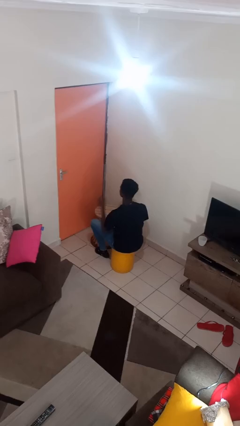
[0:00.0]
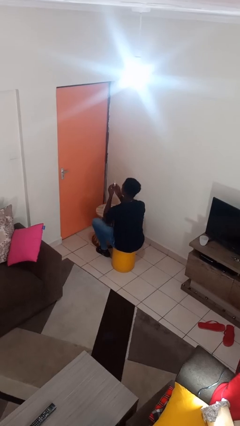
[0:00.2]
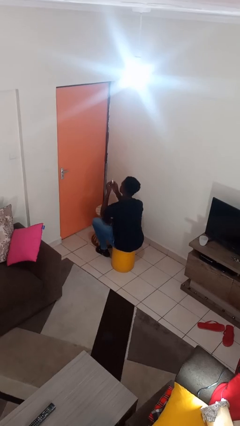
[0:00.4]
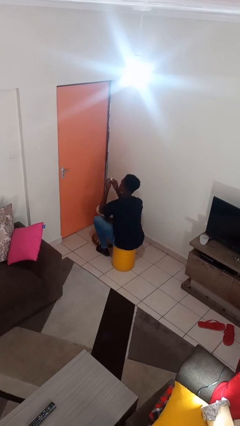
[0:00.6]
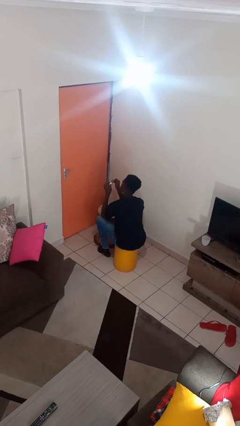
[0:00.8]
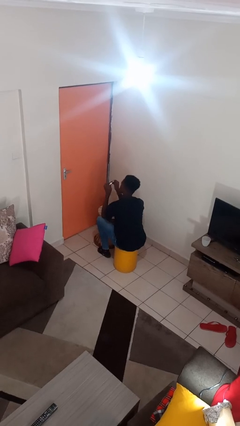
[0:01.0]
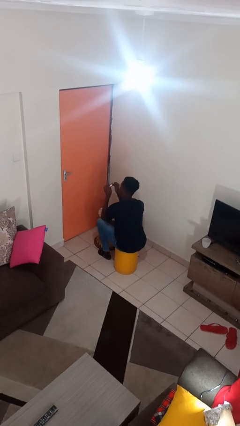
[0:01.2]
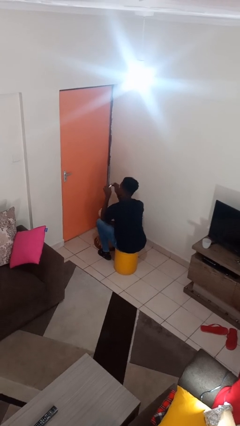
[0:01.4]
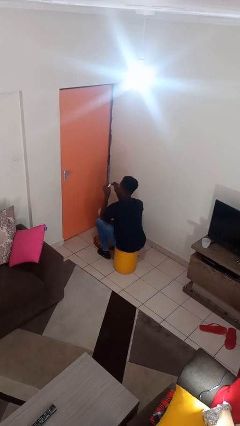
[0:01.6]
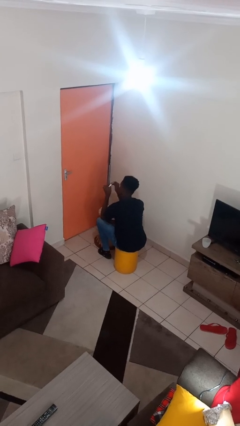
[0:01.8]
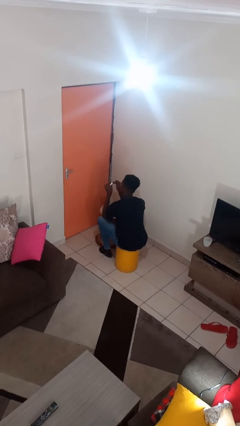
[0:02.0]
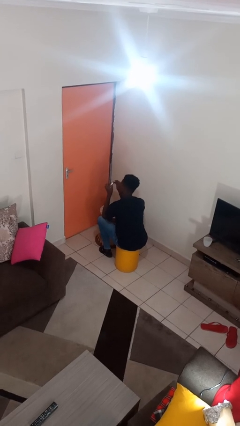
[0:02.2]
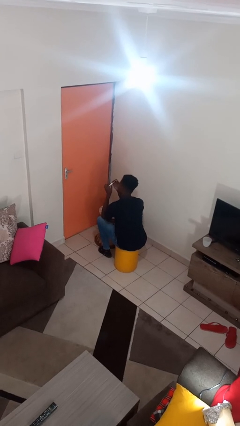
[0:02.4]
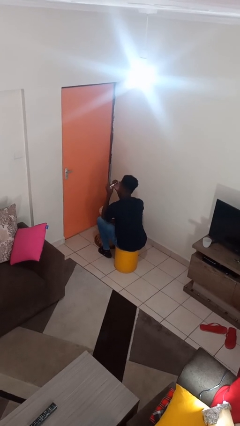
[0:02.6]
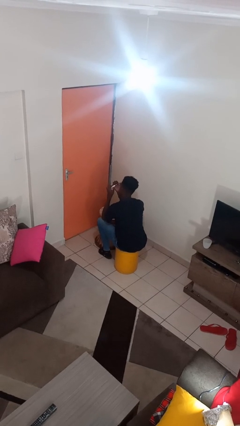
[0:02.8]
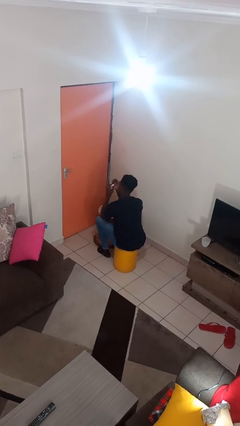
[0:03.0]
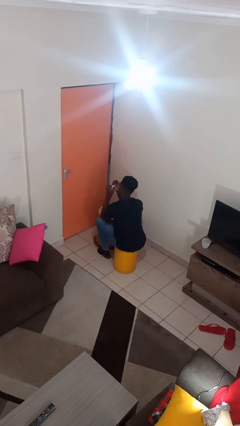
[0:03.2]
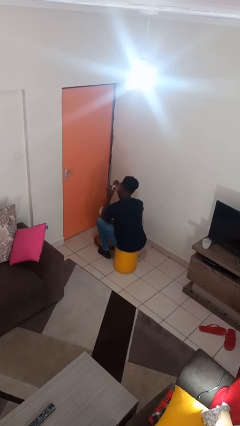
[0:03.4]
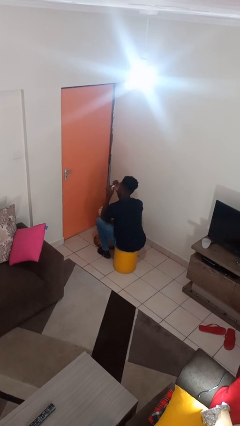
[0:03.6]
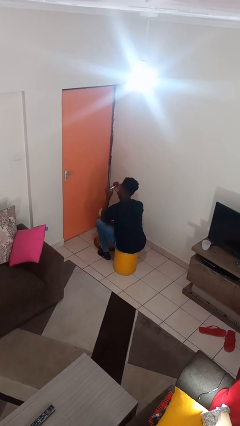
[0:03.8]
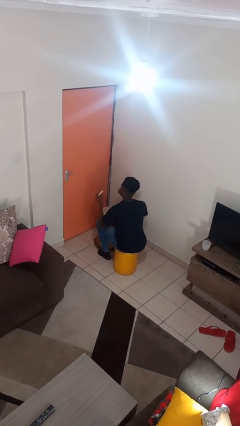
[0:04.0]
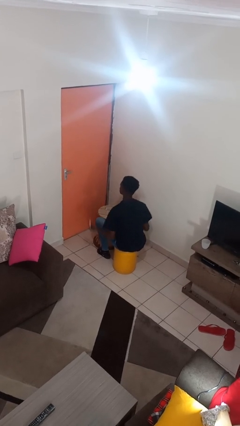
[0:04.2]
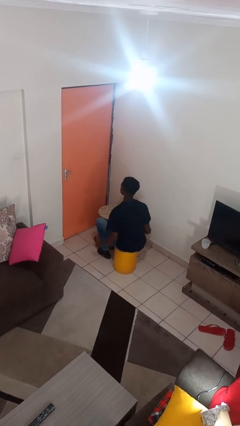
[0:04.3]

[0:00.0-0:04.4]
person paints fingernails

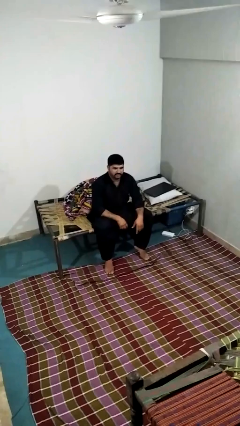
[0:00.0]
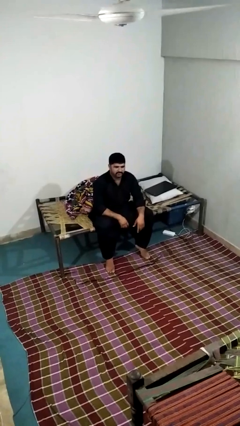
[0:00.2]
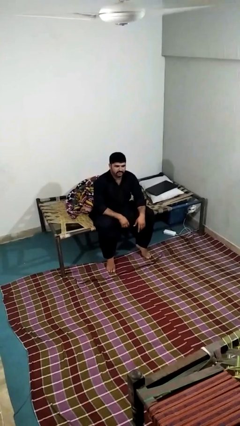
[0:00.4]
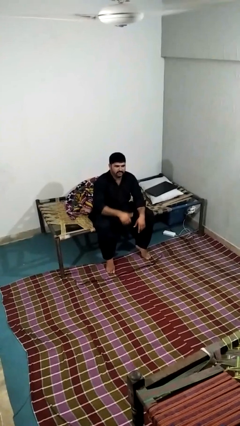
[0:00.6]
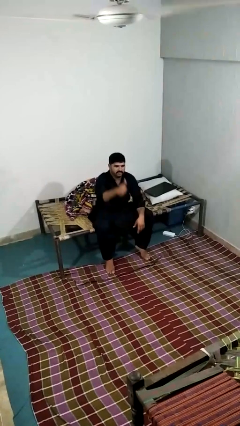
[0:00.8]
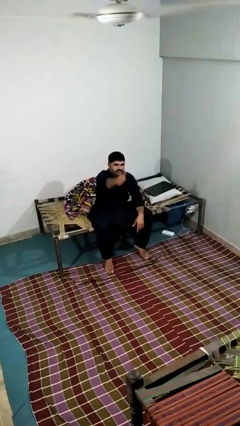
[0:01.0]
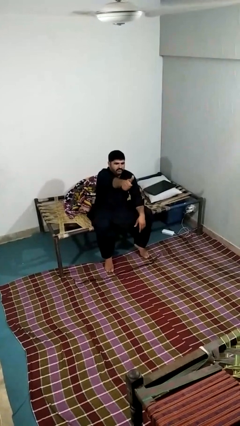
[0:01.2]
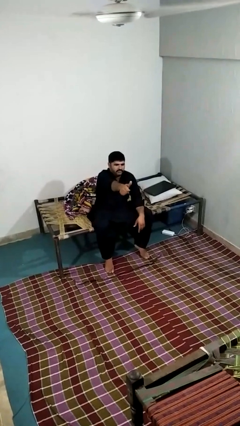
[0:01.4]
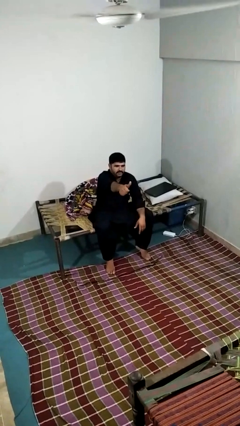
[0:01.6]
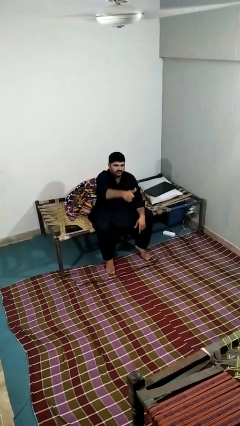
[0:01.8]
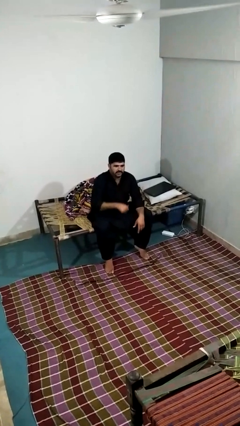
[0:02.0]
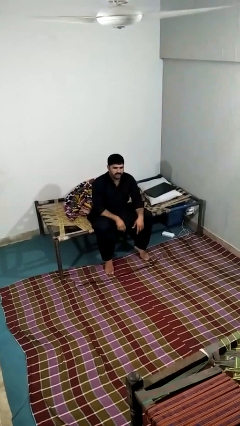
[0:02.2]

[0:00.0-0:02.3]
person gestures thumbs up

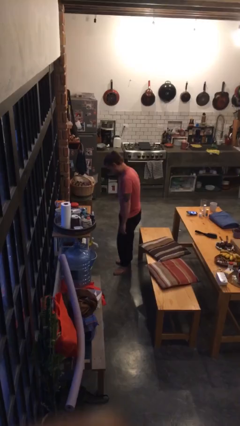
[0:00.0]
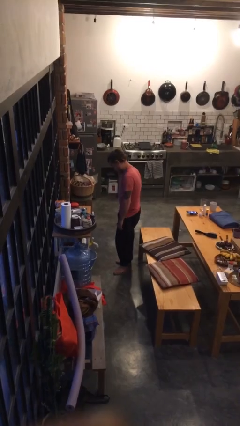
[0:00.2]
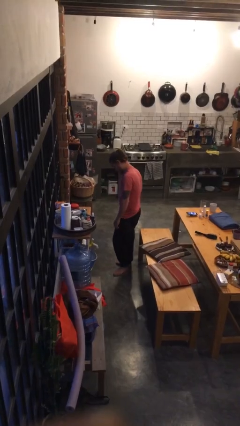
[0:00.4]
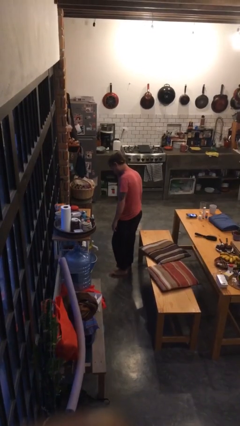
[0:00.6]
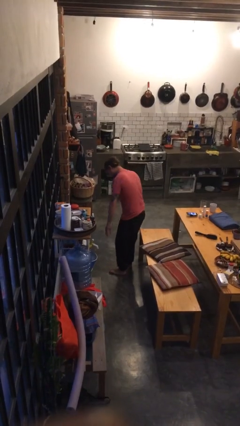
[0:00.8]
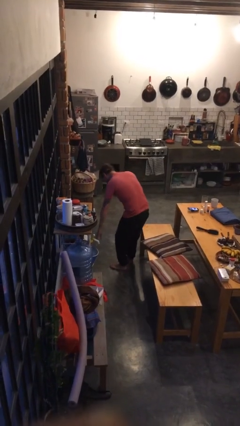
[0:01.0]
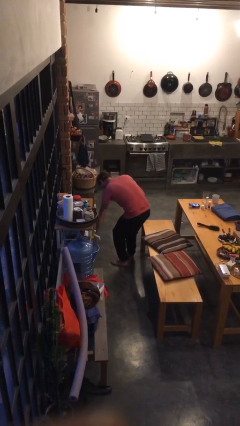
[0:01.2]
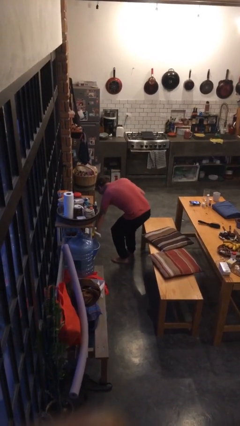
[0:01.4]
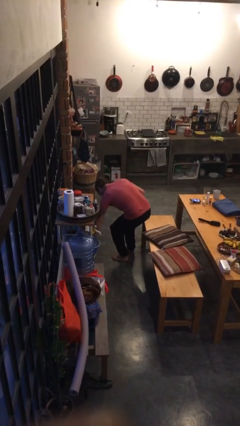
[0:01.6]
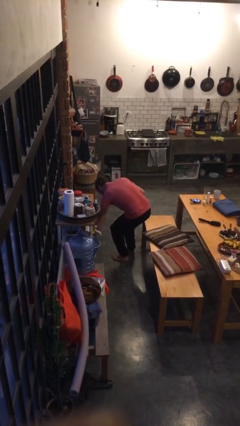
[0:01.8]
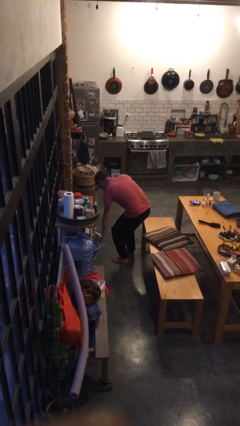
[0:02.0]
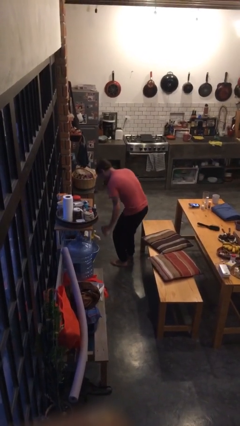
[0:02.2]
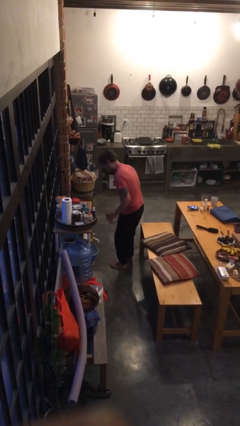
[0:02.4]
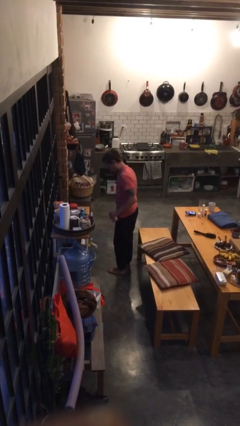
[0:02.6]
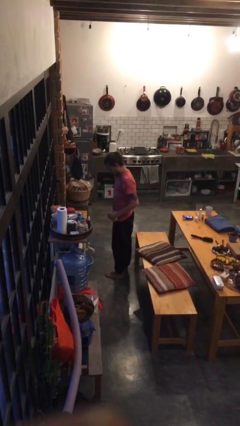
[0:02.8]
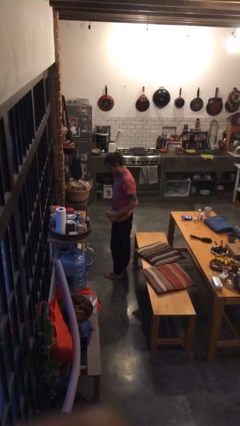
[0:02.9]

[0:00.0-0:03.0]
person picks up object from cabinet

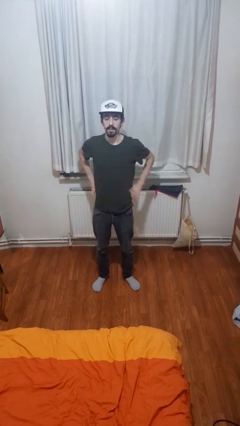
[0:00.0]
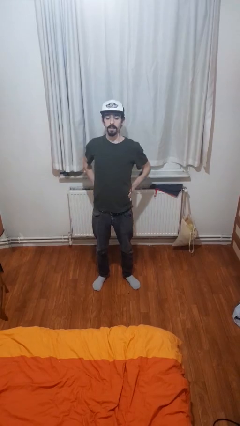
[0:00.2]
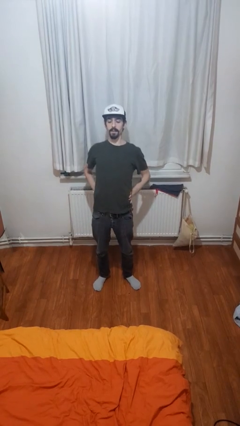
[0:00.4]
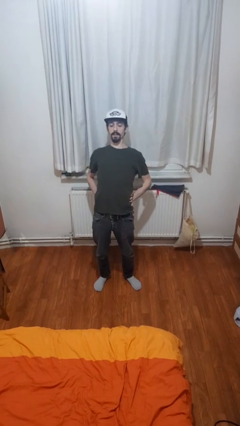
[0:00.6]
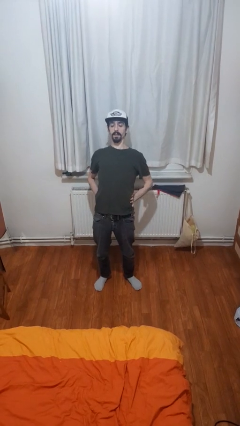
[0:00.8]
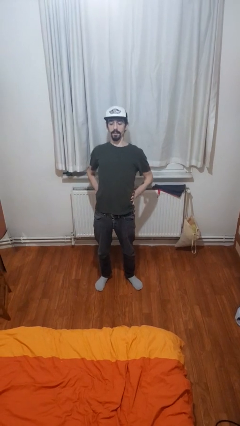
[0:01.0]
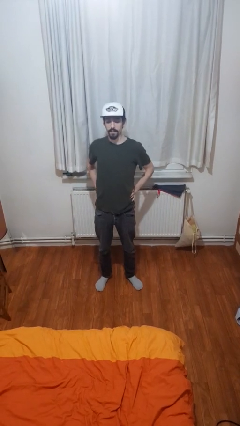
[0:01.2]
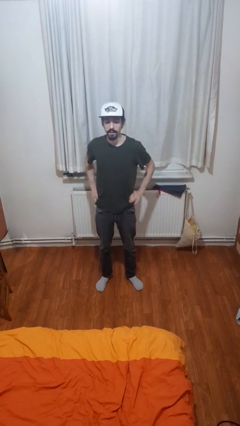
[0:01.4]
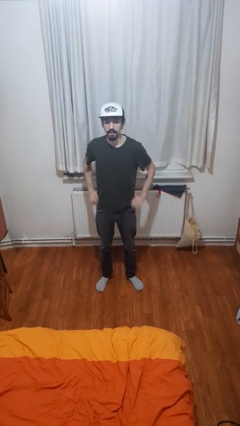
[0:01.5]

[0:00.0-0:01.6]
person stretches back

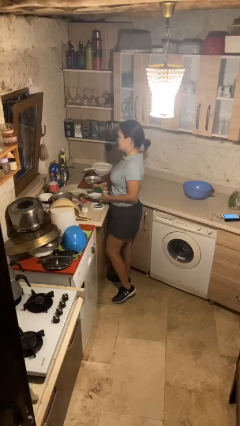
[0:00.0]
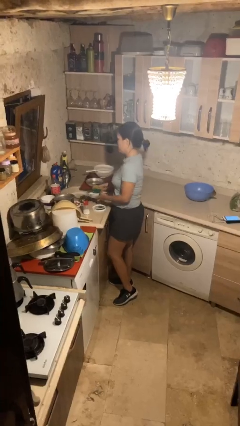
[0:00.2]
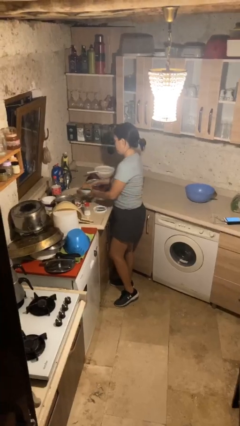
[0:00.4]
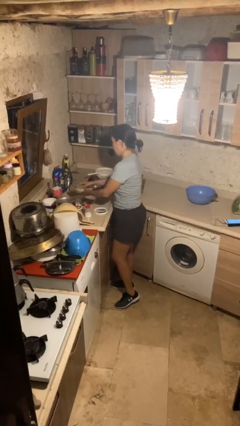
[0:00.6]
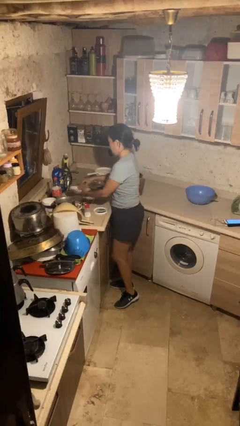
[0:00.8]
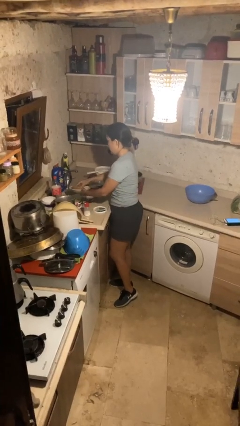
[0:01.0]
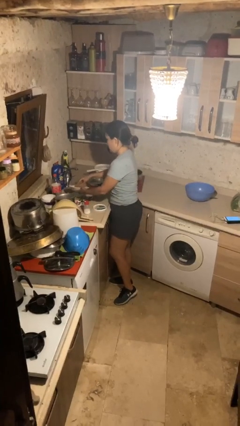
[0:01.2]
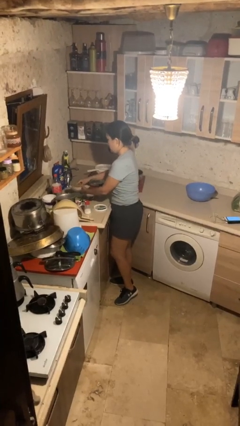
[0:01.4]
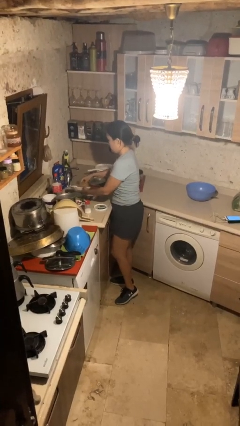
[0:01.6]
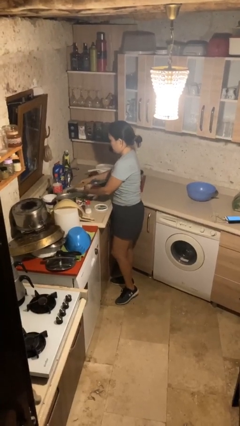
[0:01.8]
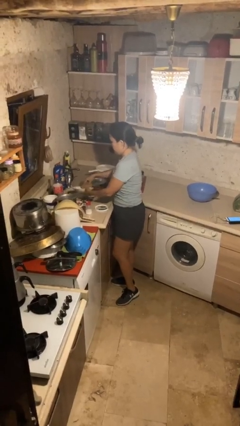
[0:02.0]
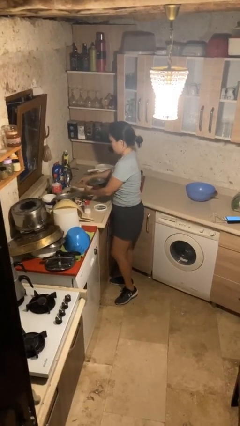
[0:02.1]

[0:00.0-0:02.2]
person washes dish

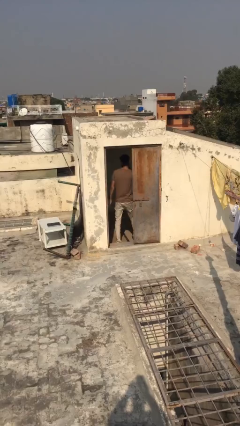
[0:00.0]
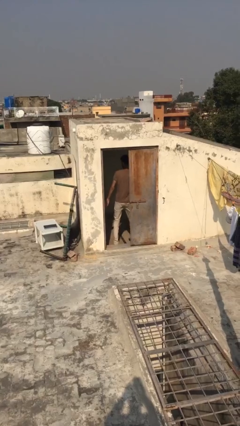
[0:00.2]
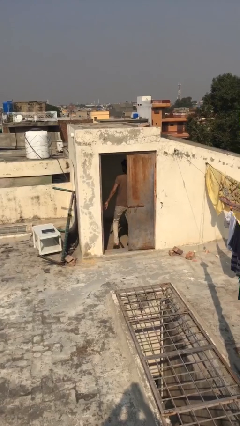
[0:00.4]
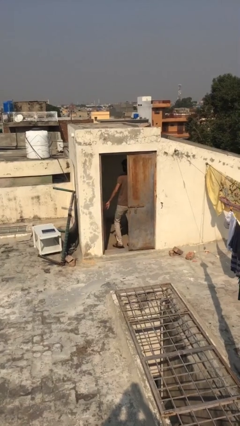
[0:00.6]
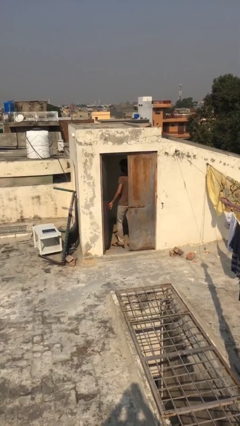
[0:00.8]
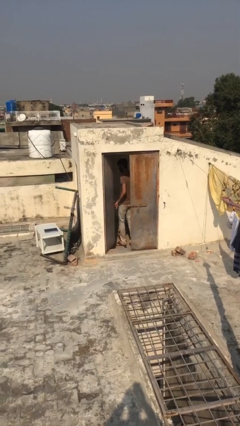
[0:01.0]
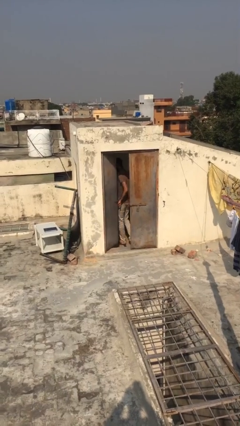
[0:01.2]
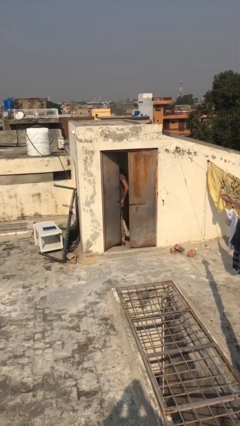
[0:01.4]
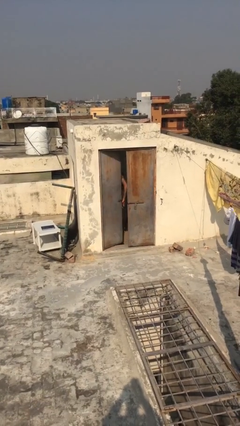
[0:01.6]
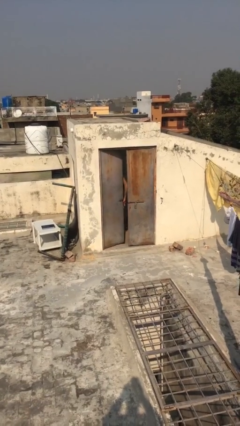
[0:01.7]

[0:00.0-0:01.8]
person closes facility door

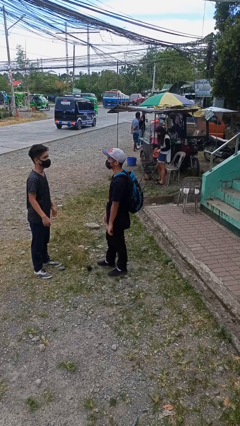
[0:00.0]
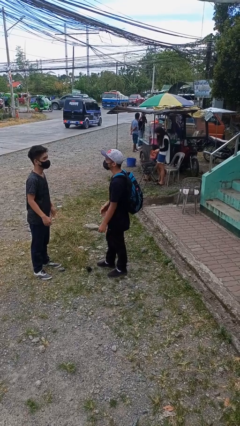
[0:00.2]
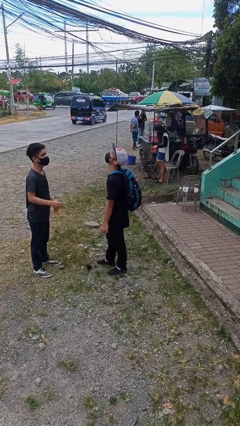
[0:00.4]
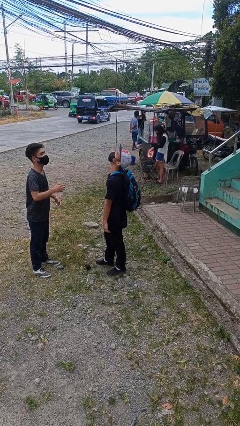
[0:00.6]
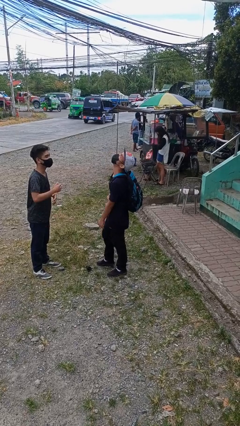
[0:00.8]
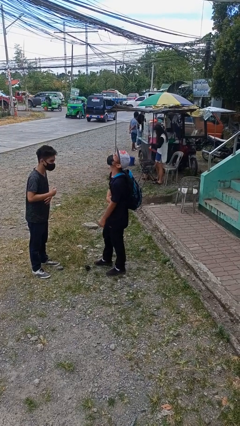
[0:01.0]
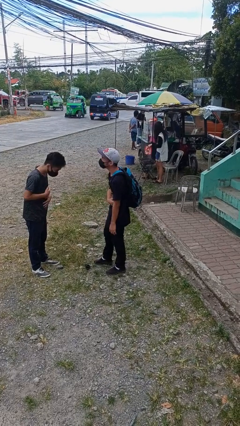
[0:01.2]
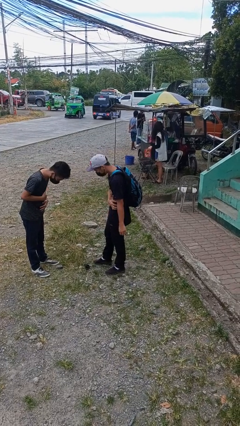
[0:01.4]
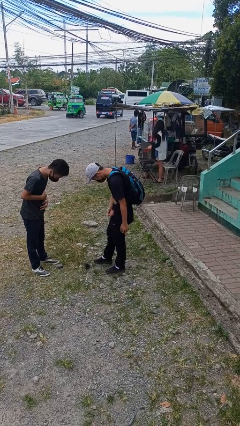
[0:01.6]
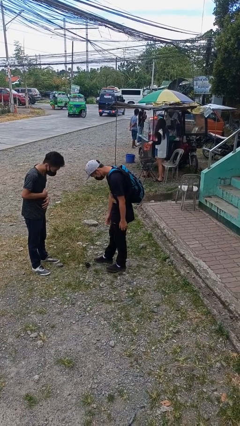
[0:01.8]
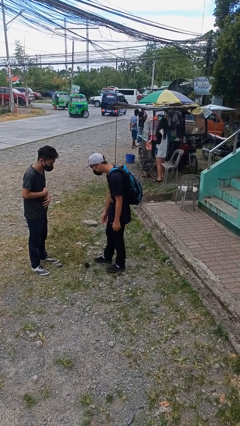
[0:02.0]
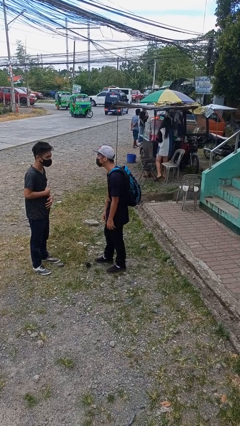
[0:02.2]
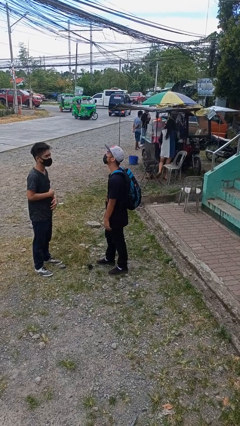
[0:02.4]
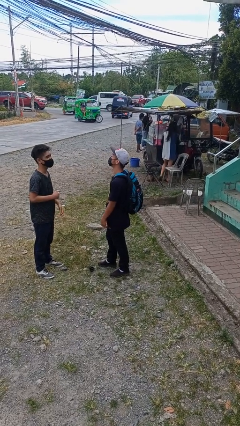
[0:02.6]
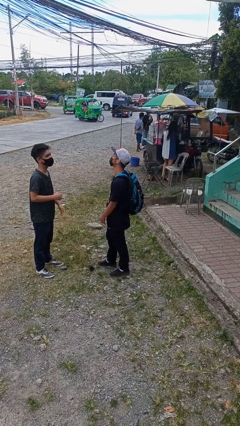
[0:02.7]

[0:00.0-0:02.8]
person laughs with person
